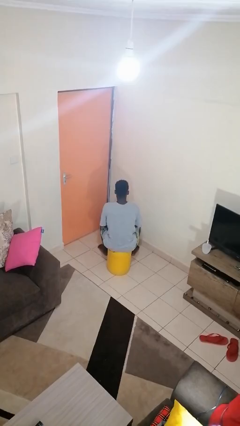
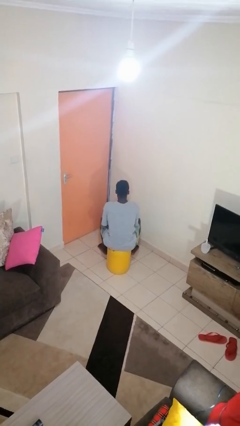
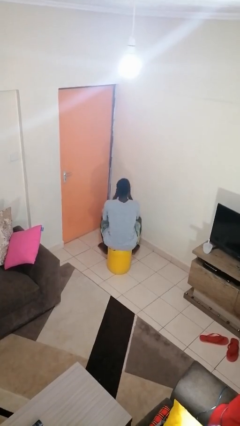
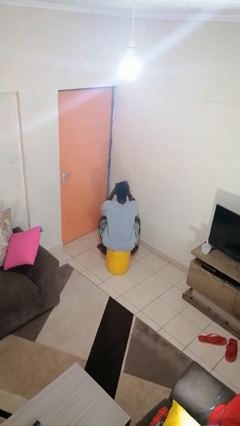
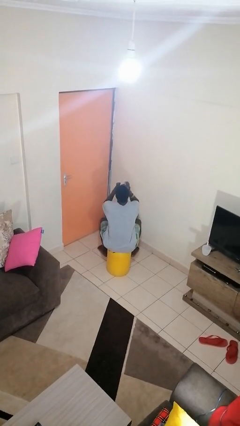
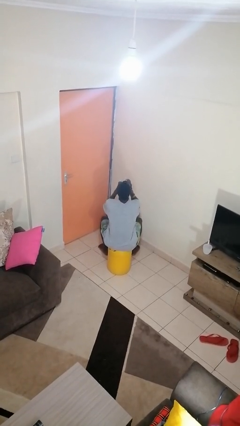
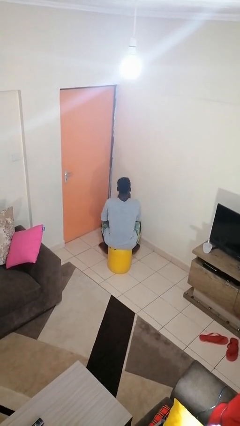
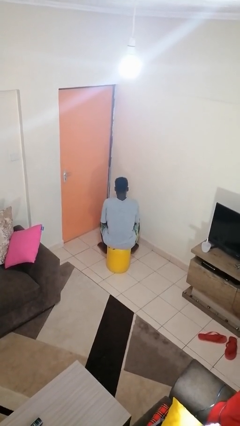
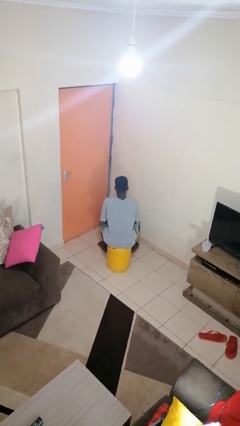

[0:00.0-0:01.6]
person drinks from mug

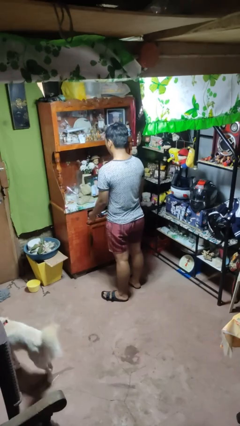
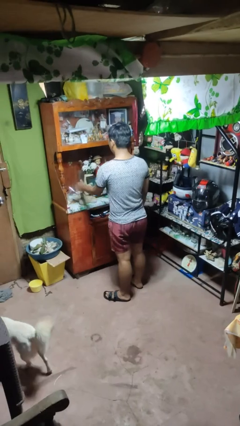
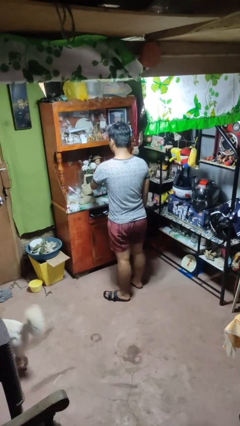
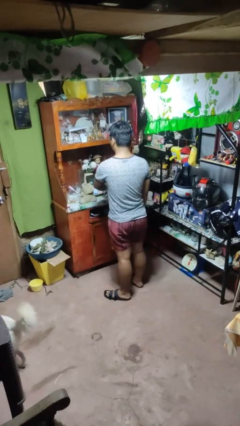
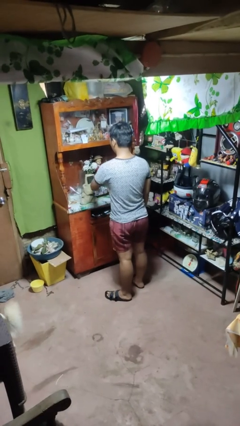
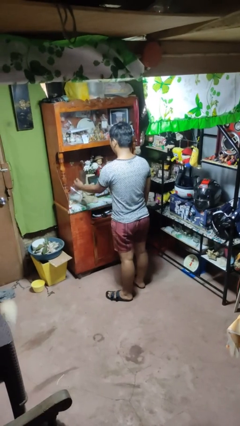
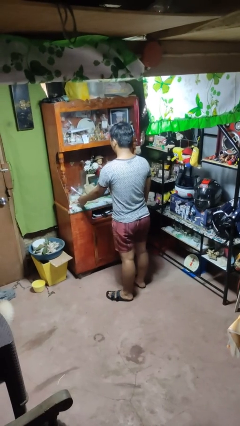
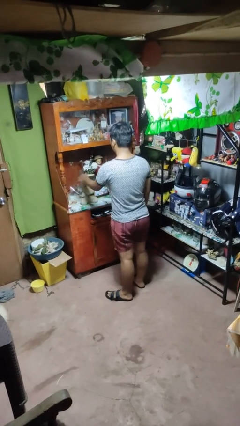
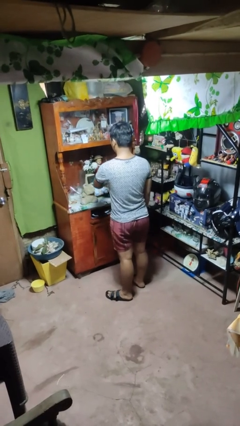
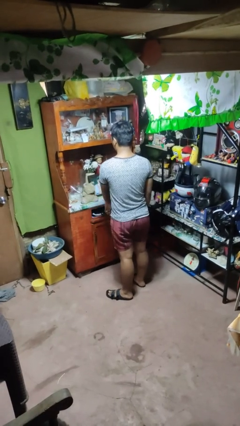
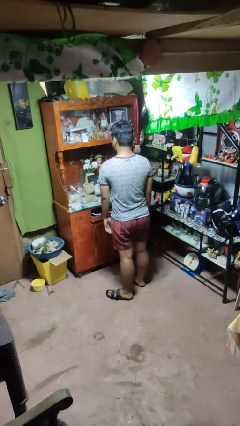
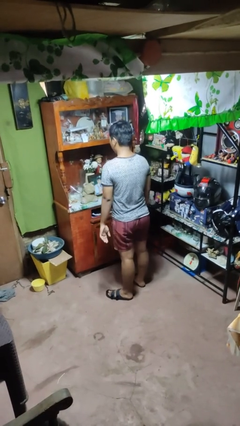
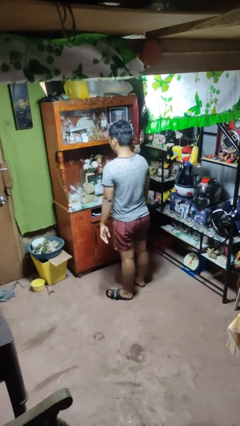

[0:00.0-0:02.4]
person waves hand over object

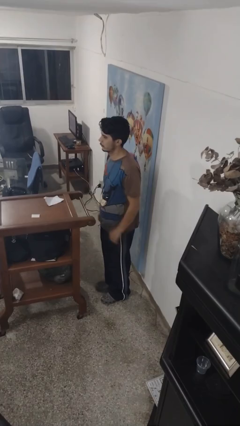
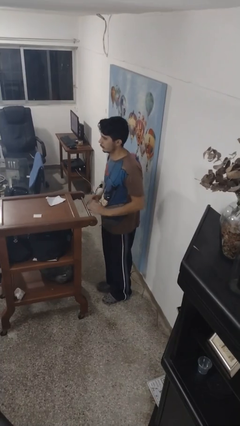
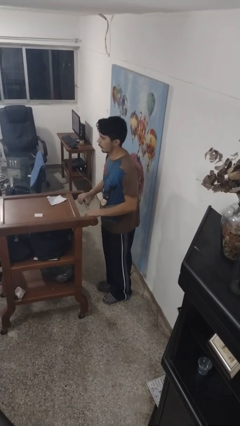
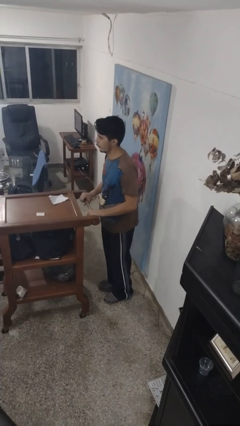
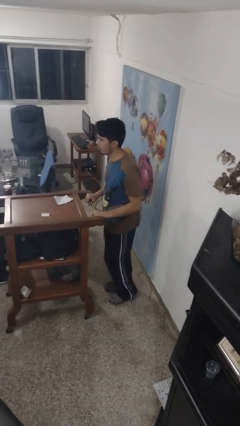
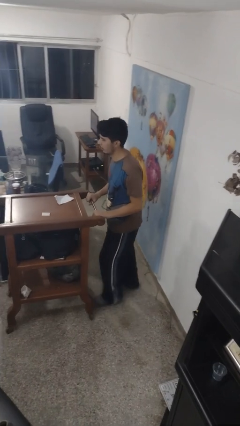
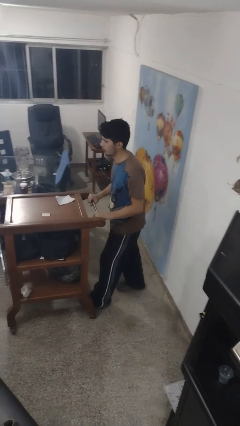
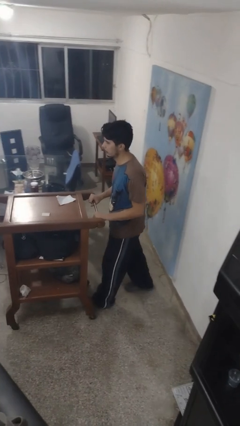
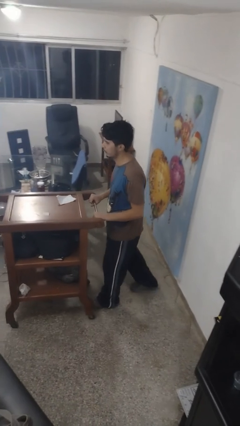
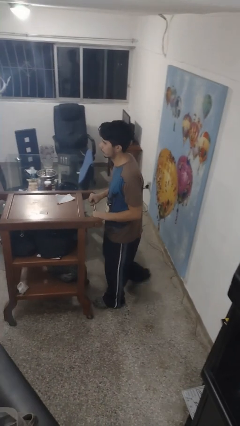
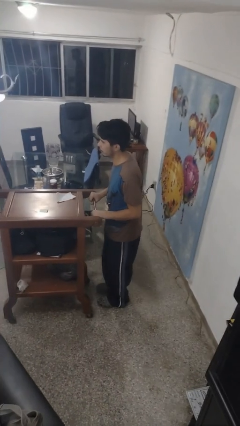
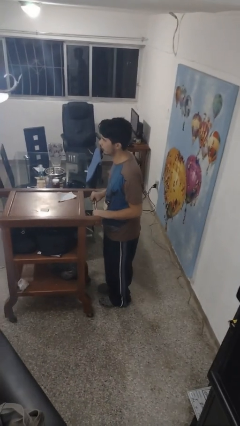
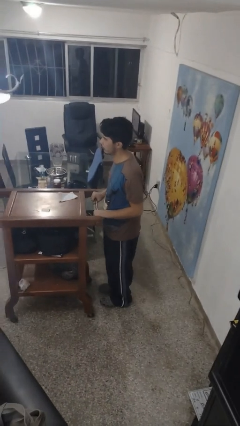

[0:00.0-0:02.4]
person pushes wheeled cart

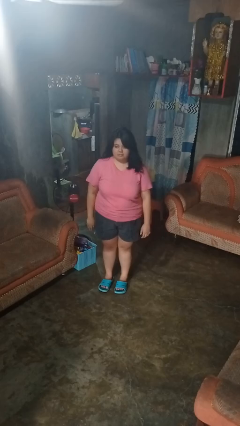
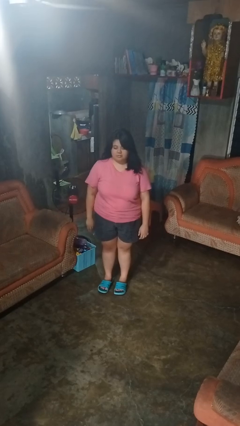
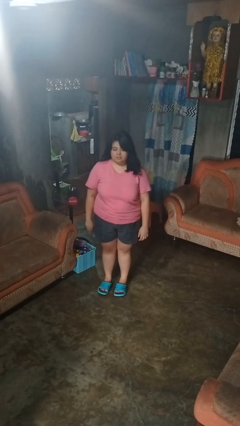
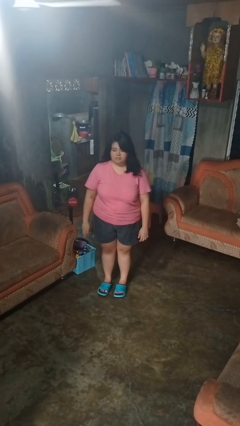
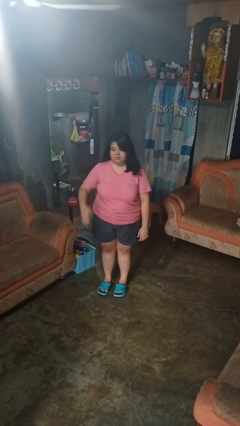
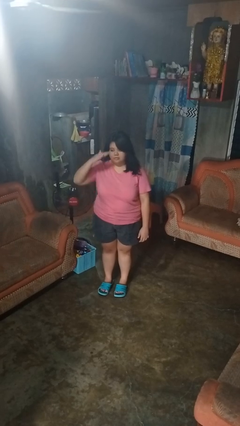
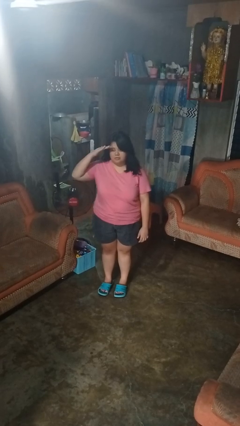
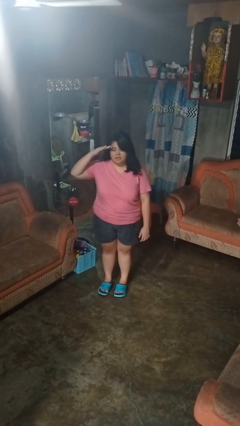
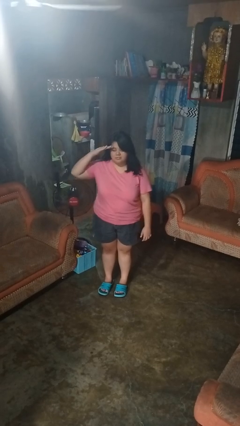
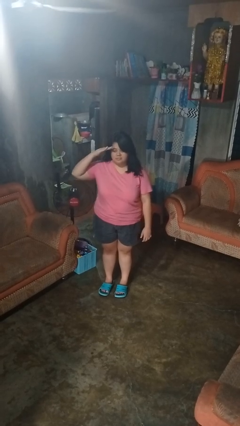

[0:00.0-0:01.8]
person salutes

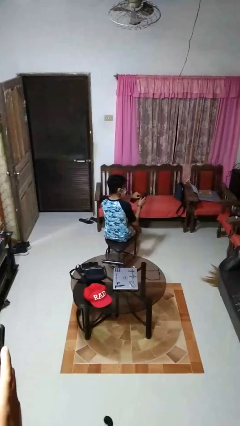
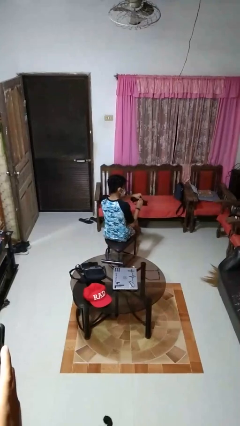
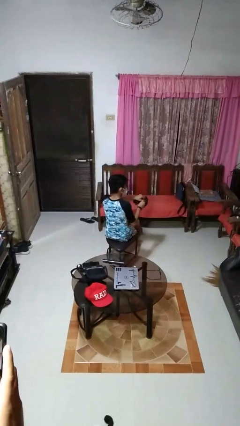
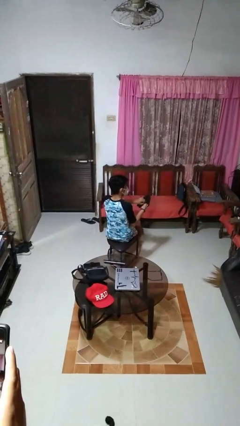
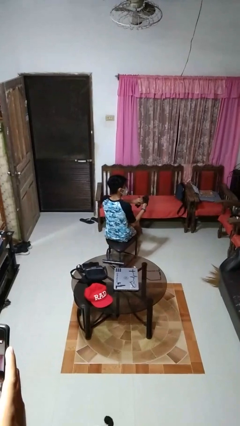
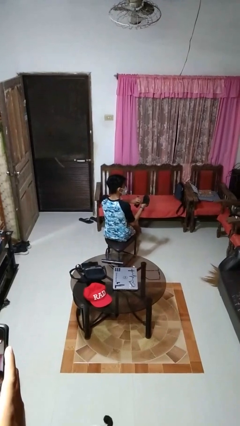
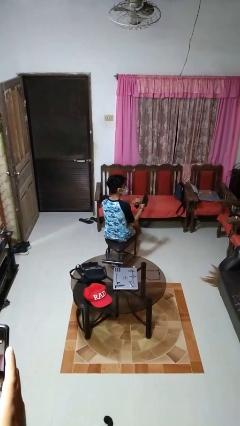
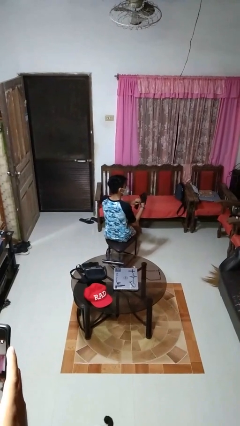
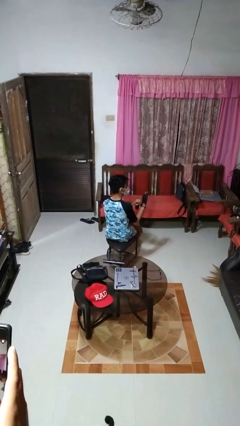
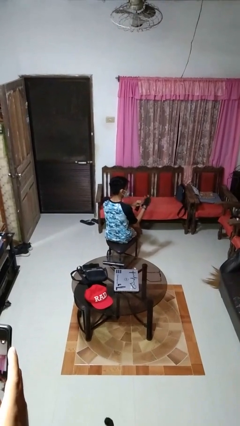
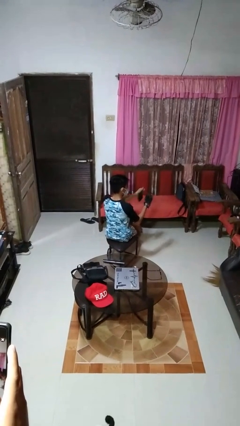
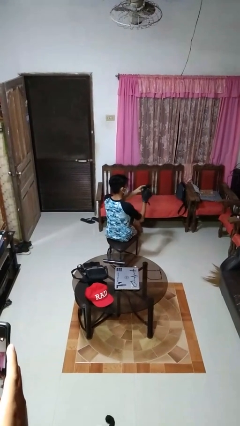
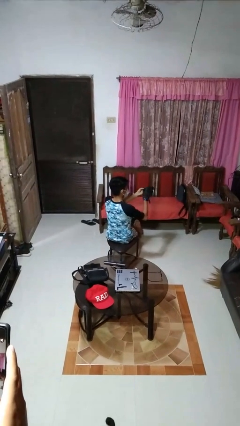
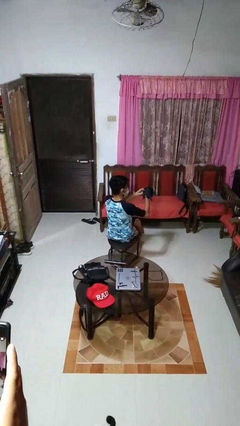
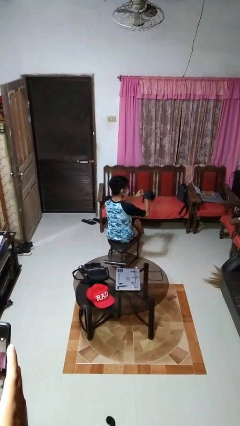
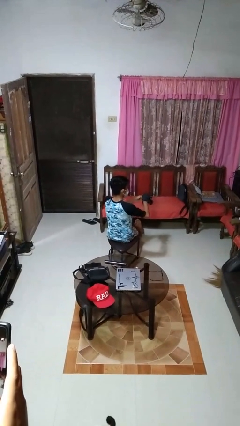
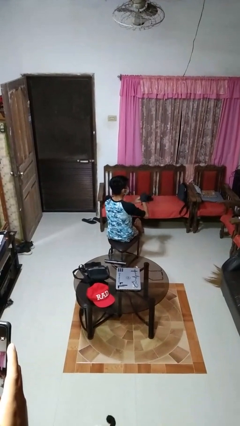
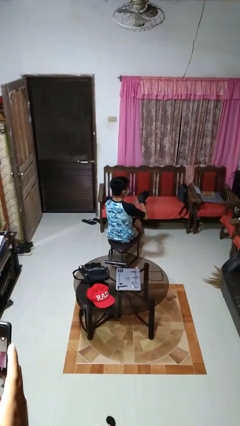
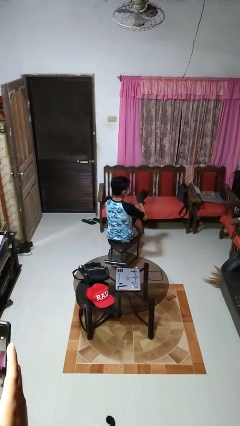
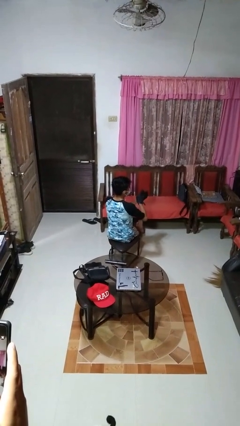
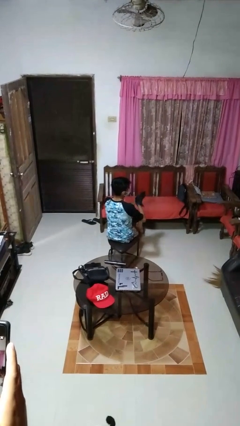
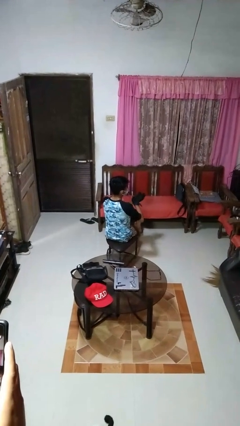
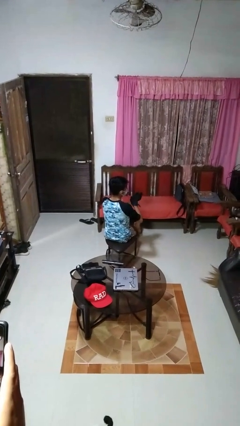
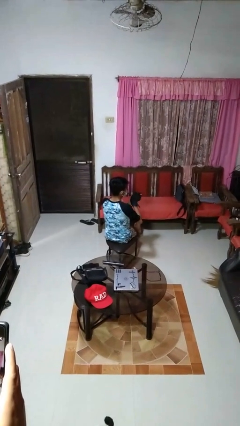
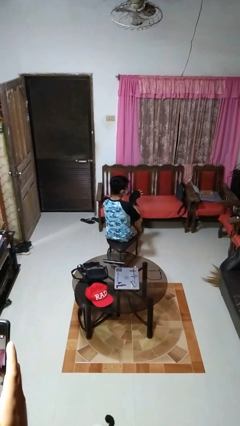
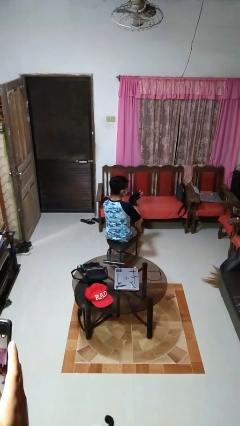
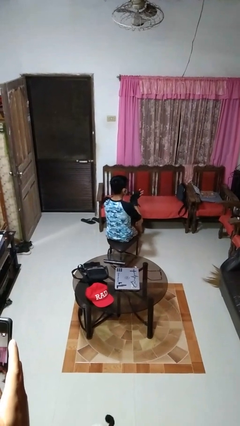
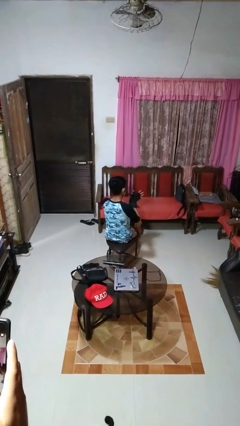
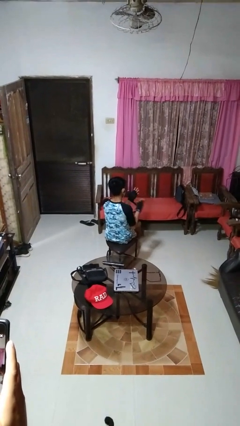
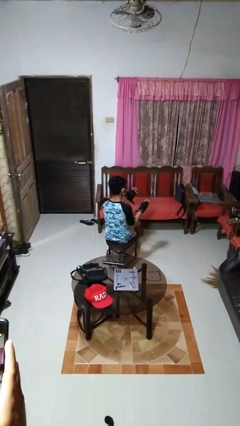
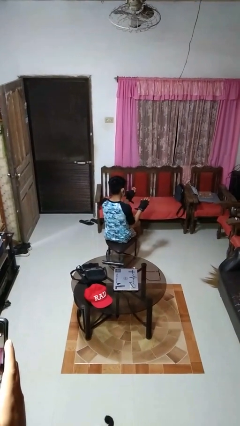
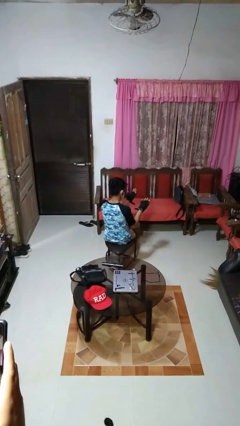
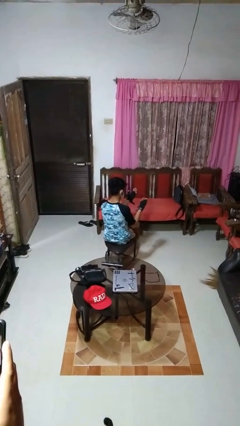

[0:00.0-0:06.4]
person puts on gloves

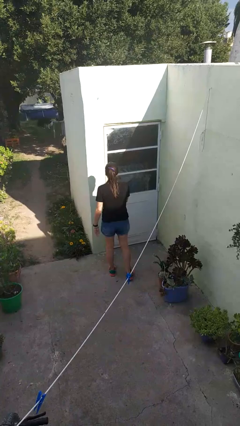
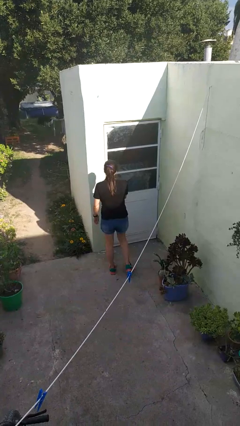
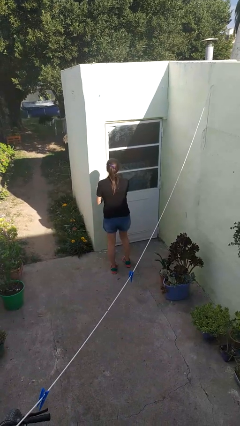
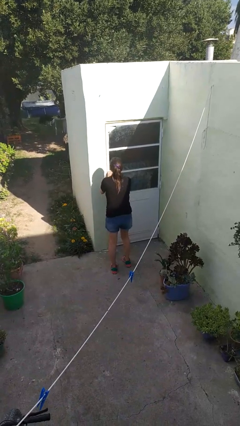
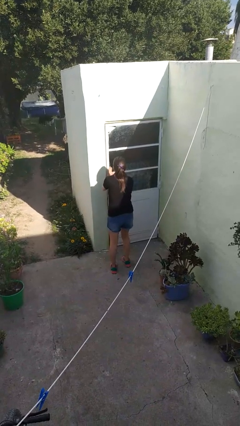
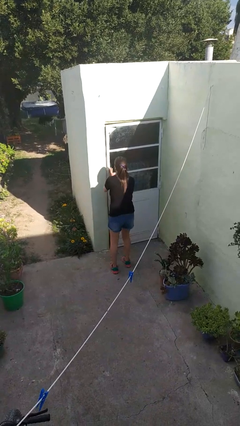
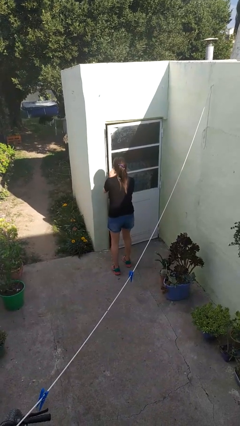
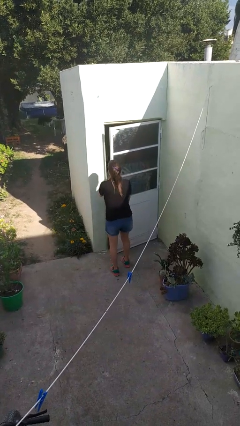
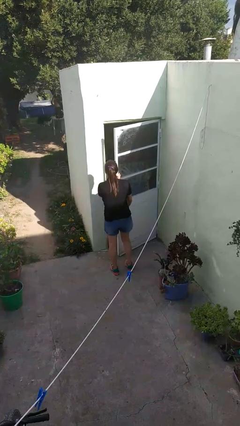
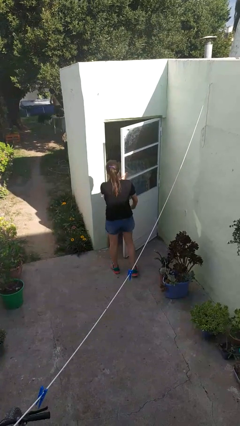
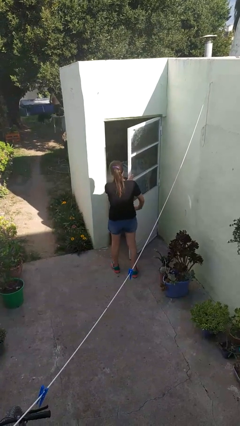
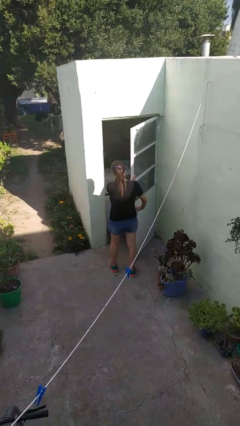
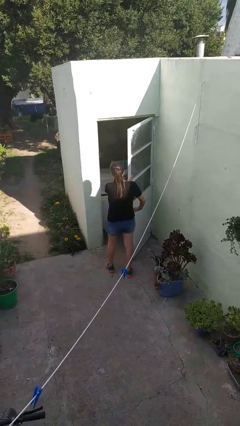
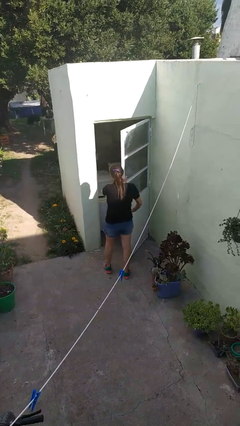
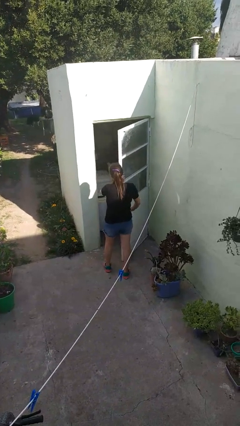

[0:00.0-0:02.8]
person opens facility door
